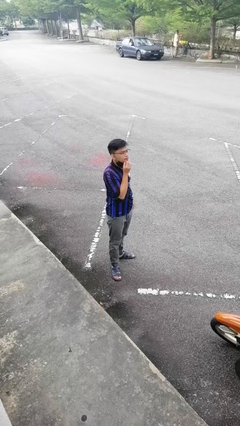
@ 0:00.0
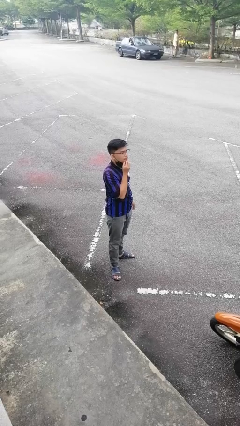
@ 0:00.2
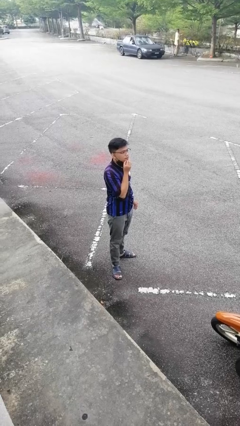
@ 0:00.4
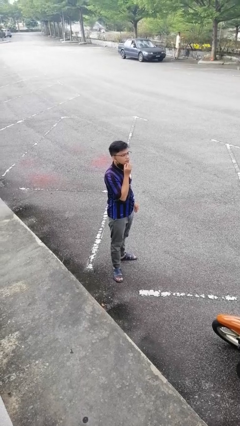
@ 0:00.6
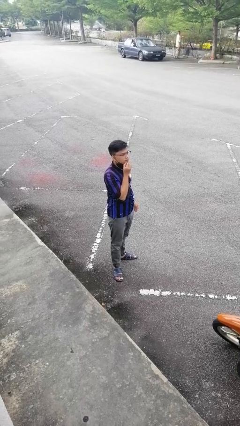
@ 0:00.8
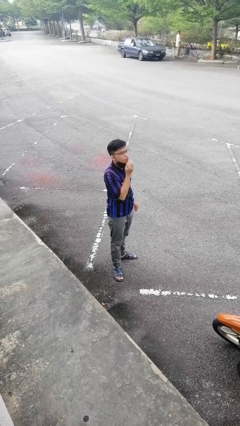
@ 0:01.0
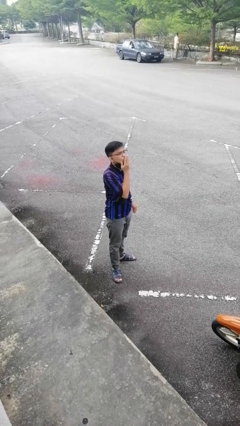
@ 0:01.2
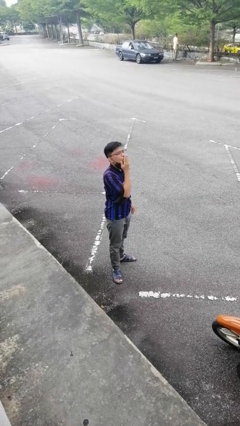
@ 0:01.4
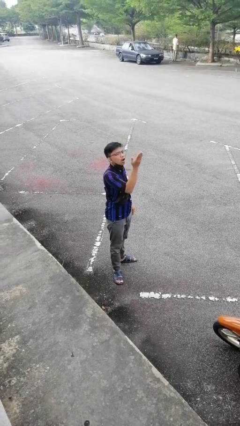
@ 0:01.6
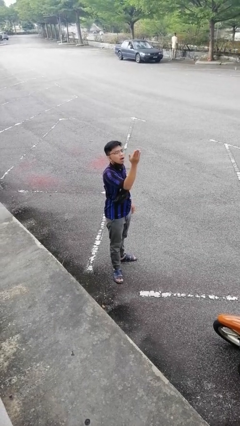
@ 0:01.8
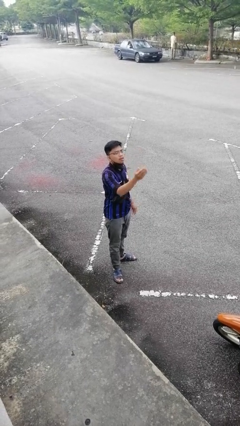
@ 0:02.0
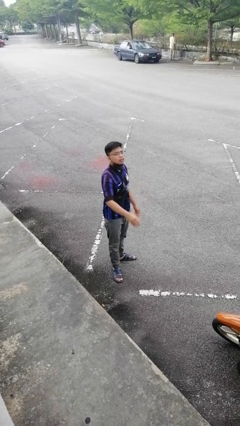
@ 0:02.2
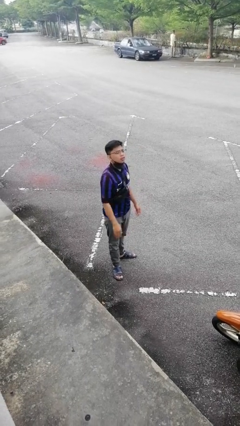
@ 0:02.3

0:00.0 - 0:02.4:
person gestures blow kiss

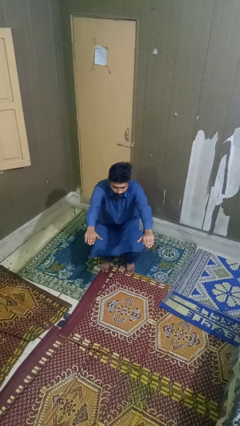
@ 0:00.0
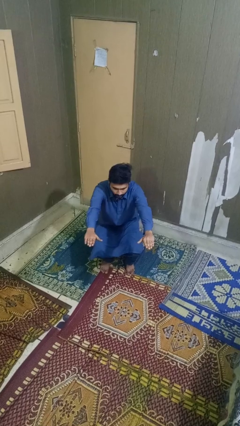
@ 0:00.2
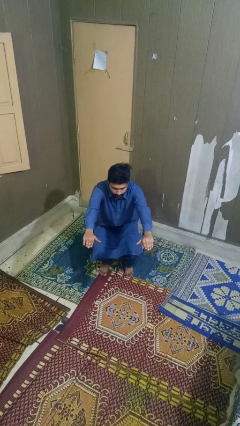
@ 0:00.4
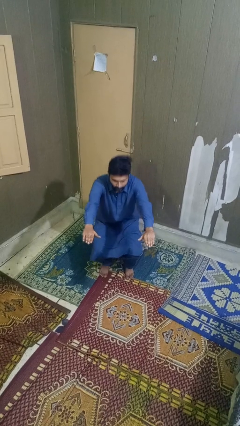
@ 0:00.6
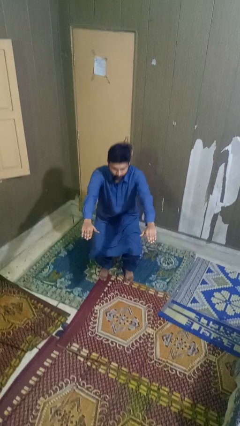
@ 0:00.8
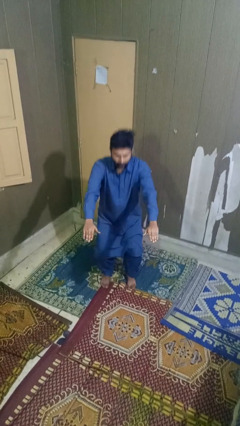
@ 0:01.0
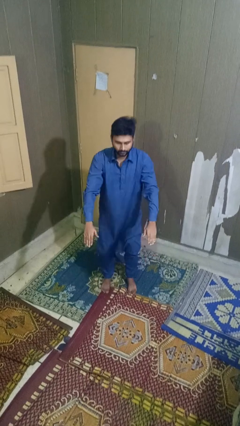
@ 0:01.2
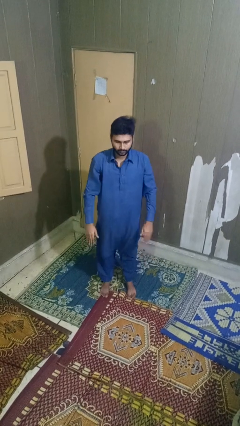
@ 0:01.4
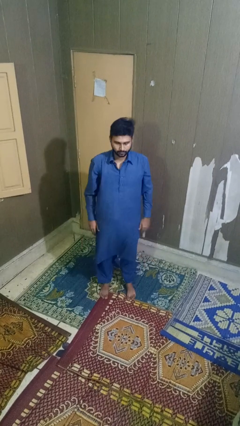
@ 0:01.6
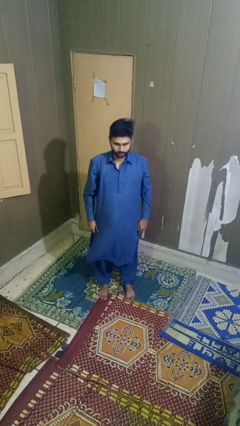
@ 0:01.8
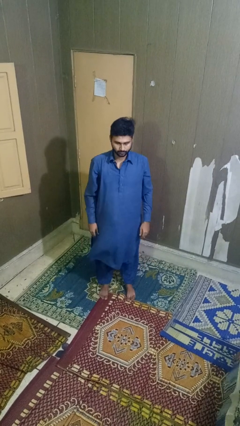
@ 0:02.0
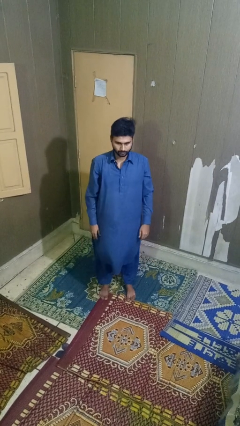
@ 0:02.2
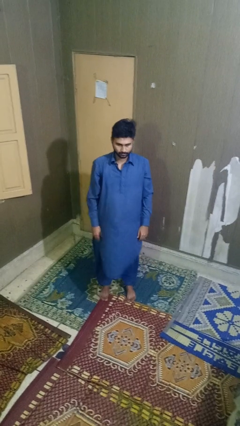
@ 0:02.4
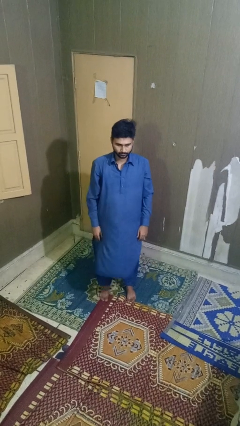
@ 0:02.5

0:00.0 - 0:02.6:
person stands up

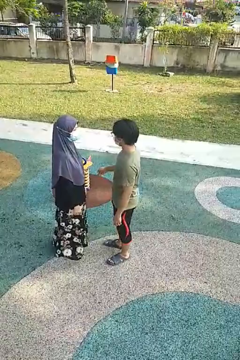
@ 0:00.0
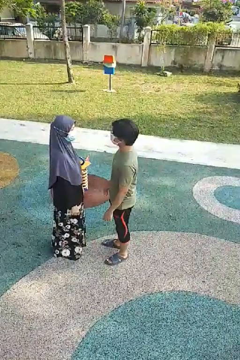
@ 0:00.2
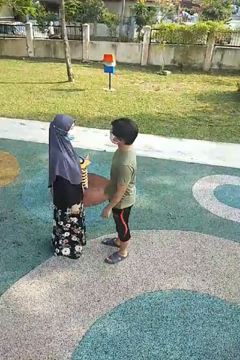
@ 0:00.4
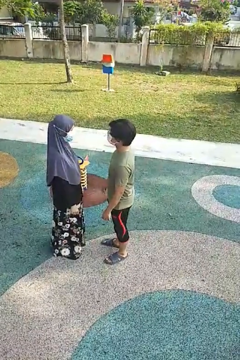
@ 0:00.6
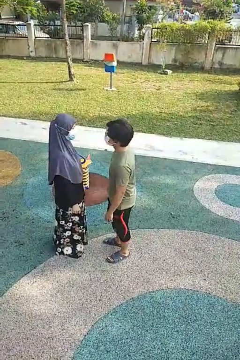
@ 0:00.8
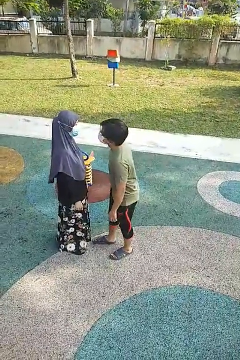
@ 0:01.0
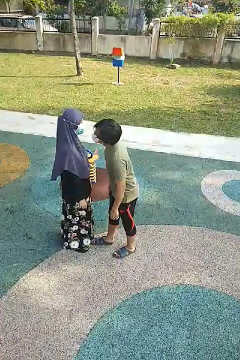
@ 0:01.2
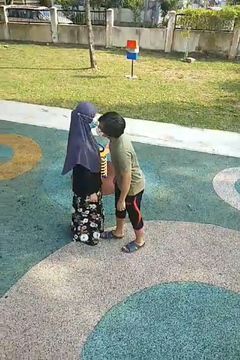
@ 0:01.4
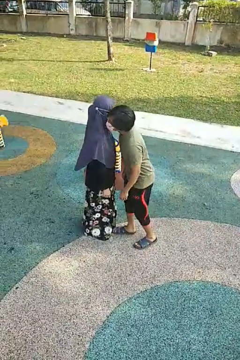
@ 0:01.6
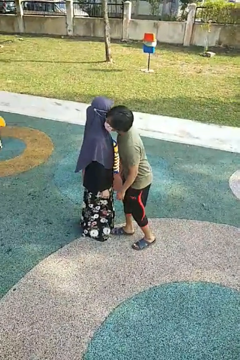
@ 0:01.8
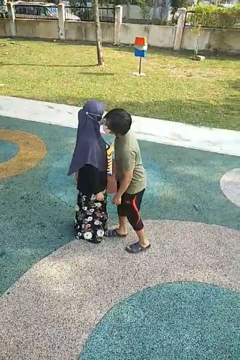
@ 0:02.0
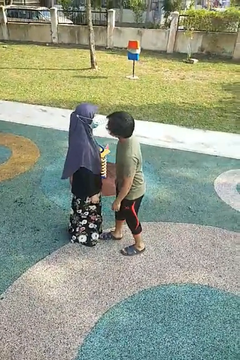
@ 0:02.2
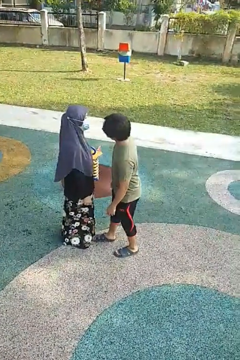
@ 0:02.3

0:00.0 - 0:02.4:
person kisses cheek of person

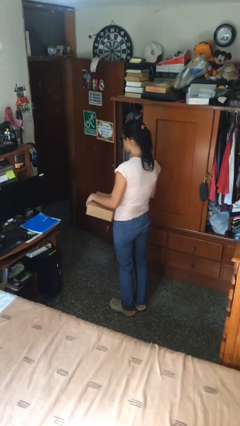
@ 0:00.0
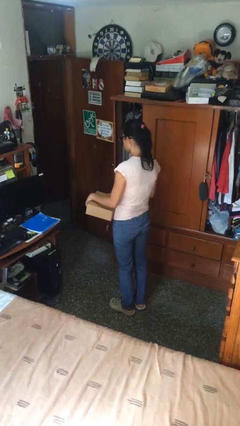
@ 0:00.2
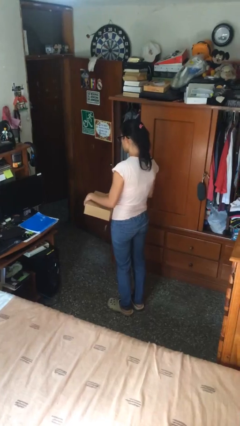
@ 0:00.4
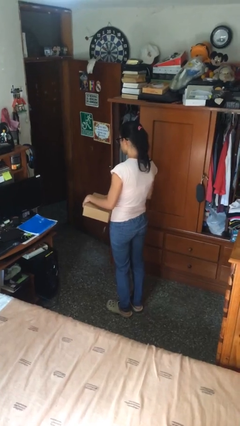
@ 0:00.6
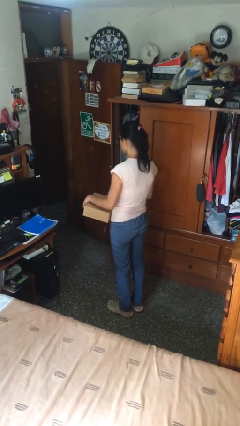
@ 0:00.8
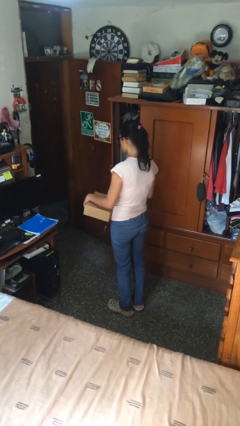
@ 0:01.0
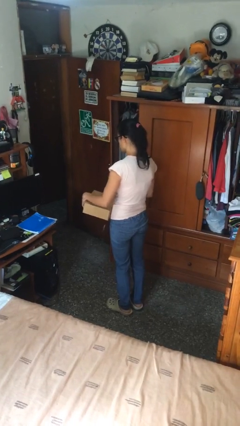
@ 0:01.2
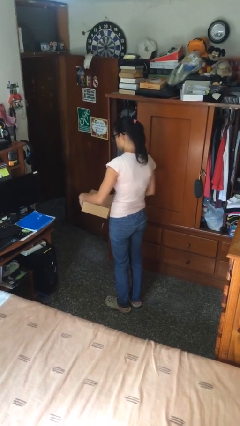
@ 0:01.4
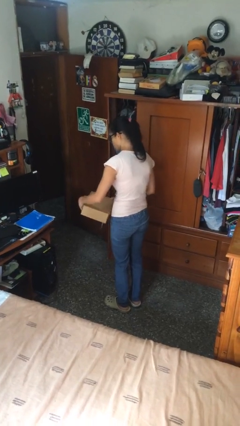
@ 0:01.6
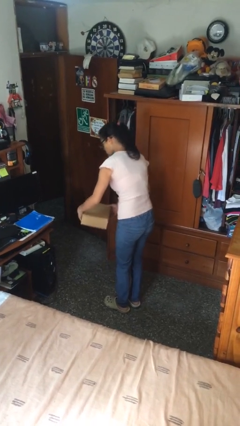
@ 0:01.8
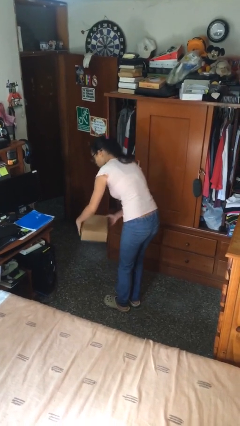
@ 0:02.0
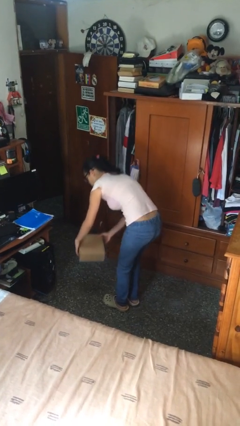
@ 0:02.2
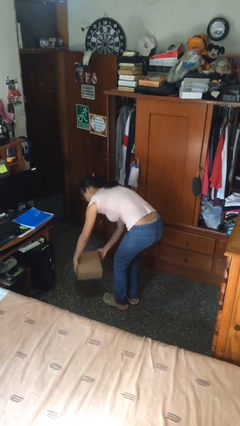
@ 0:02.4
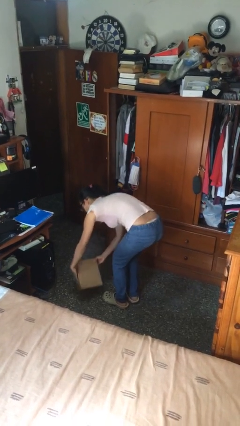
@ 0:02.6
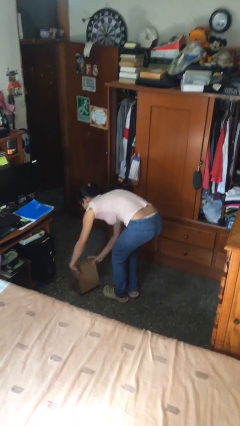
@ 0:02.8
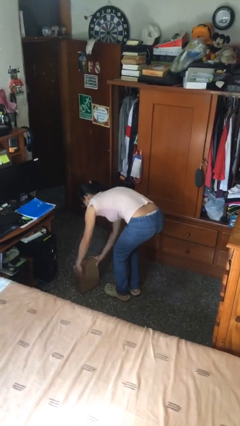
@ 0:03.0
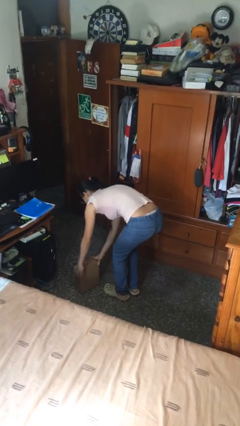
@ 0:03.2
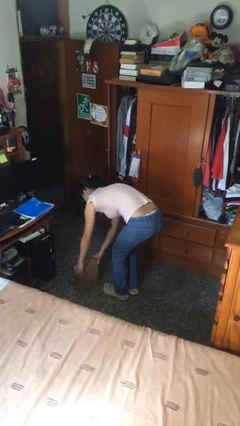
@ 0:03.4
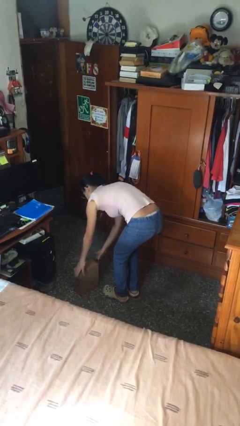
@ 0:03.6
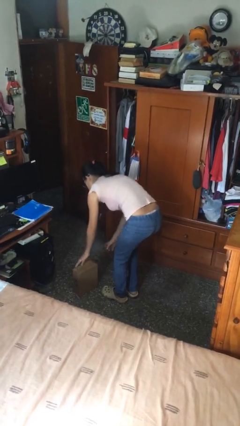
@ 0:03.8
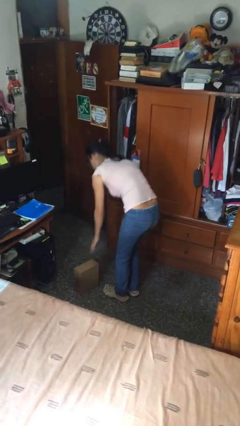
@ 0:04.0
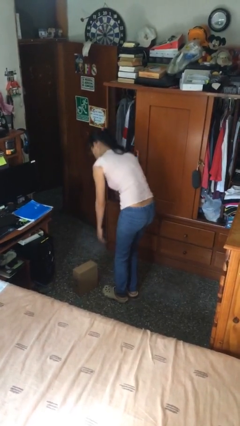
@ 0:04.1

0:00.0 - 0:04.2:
person puts down object on floor

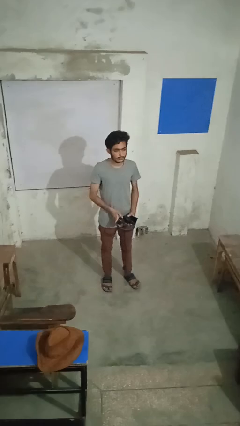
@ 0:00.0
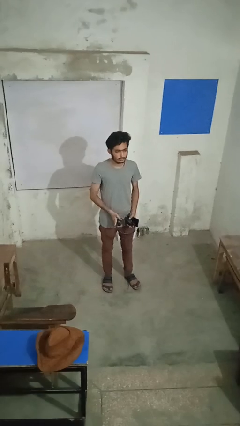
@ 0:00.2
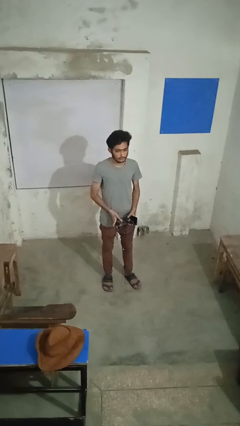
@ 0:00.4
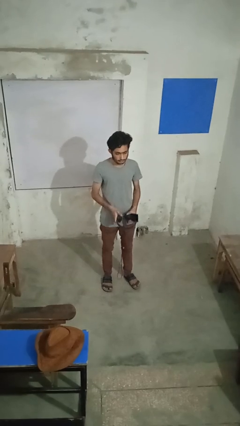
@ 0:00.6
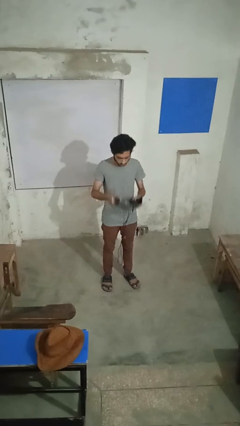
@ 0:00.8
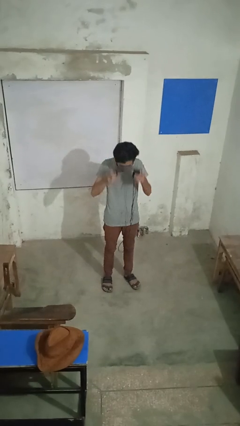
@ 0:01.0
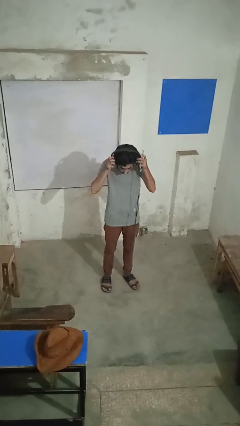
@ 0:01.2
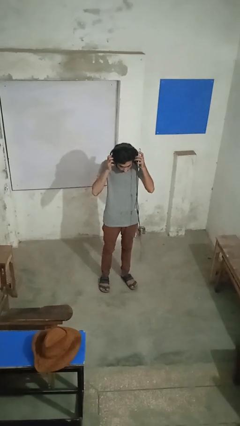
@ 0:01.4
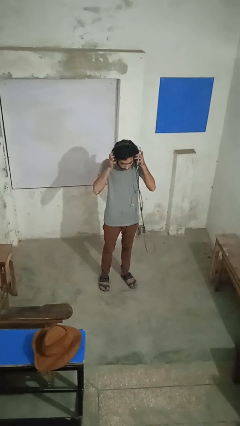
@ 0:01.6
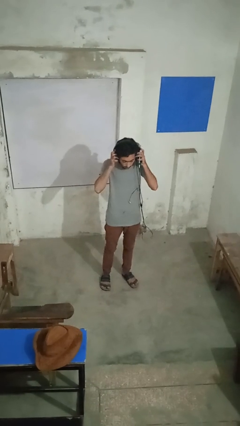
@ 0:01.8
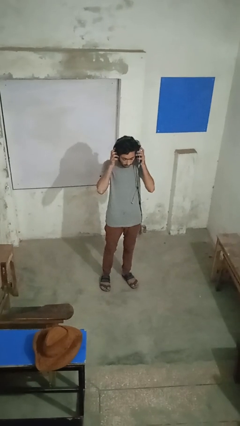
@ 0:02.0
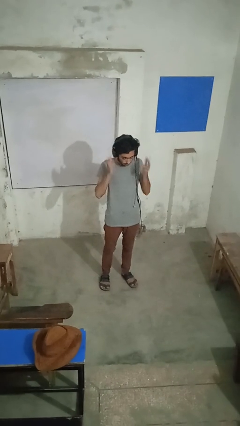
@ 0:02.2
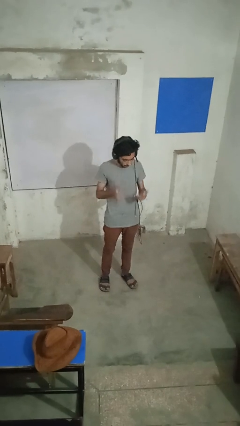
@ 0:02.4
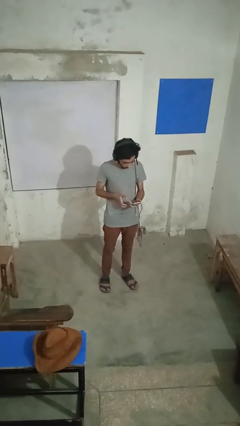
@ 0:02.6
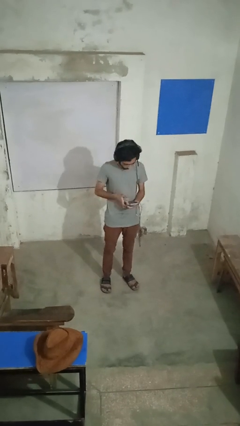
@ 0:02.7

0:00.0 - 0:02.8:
person puts on headphones

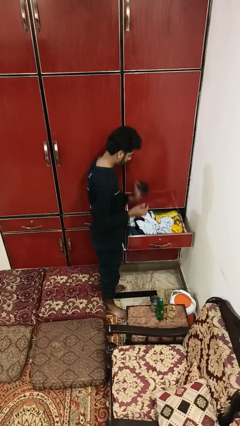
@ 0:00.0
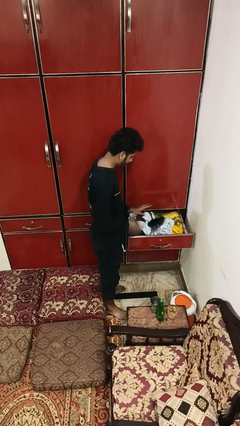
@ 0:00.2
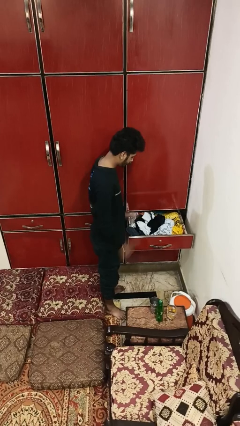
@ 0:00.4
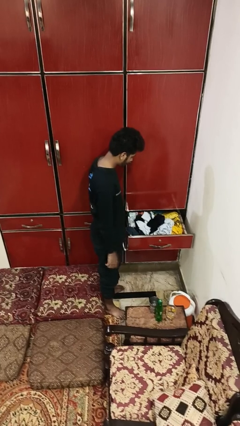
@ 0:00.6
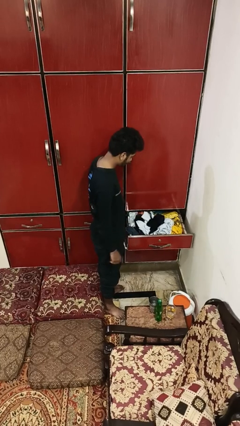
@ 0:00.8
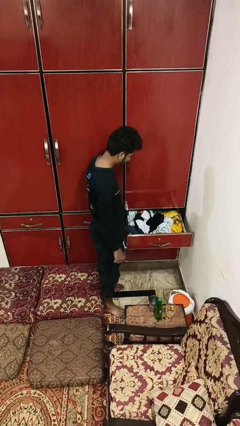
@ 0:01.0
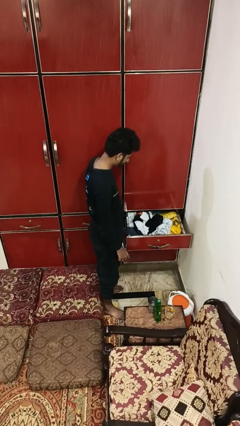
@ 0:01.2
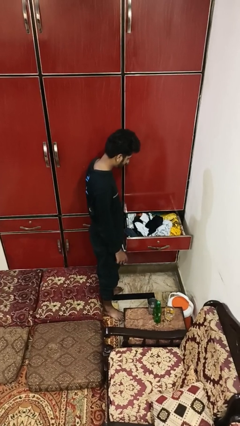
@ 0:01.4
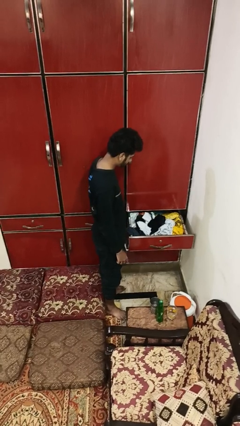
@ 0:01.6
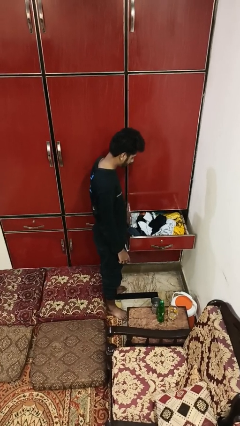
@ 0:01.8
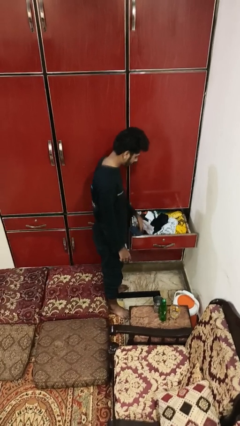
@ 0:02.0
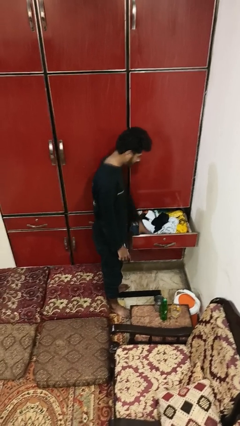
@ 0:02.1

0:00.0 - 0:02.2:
person puts clothes into dresser
